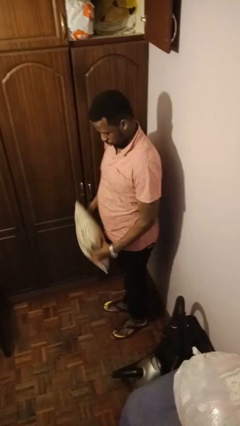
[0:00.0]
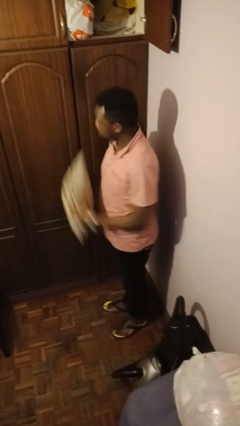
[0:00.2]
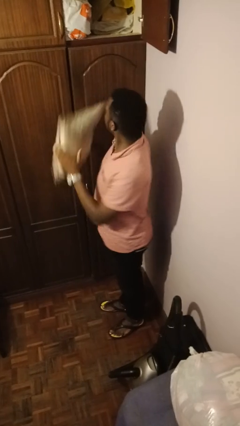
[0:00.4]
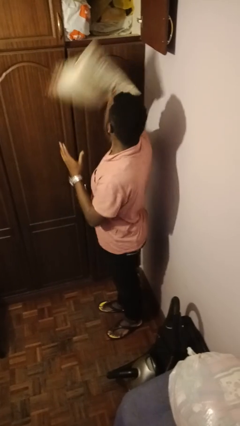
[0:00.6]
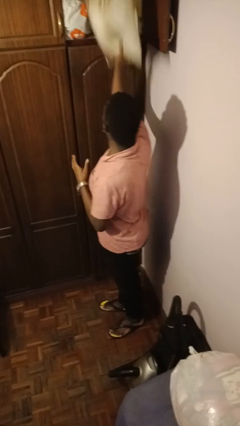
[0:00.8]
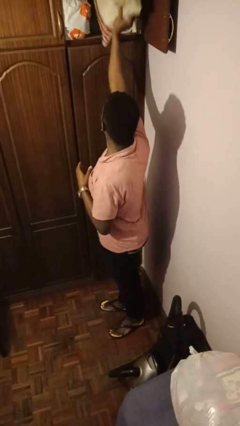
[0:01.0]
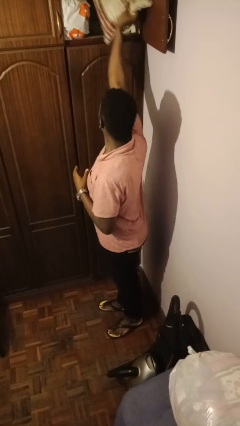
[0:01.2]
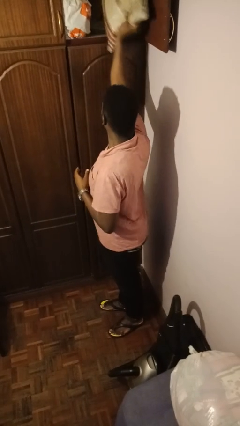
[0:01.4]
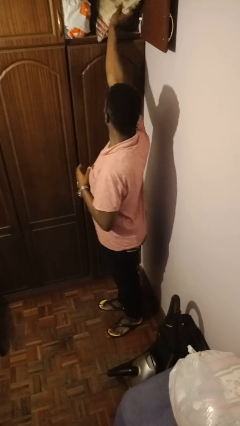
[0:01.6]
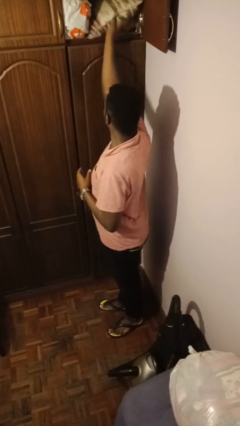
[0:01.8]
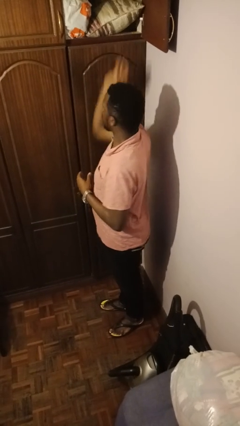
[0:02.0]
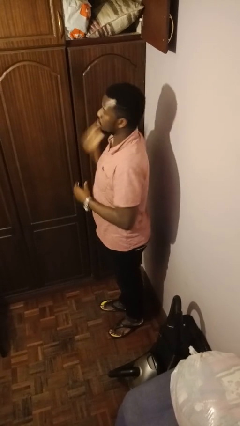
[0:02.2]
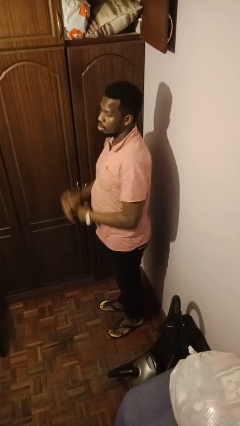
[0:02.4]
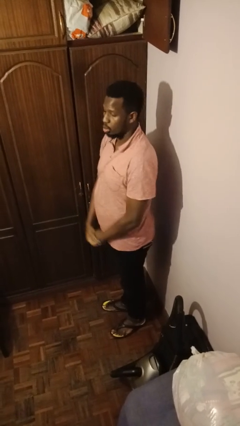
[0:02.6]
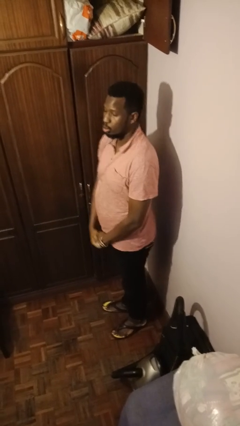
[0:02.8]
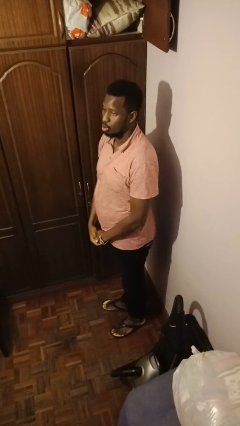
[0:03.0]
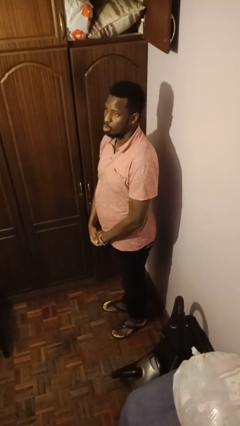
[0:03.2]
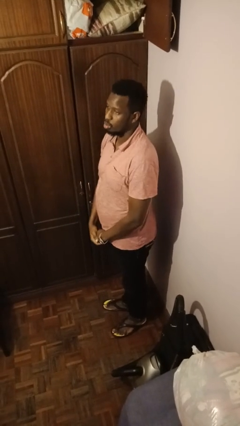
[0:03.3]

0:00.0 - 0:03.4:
person puts down object on shelf

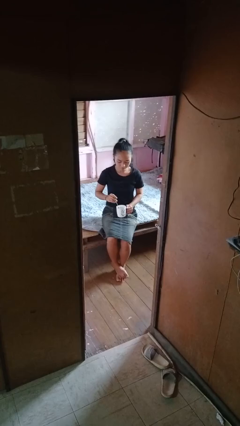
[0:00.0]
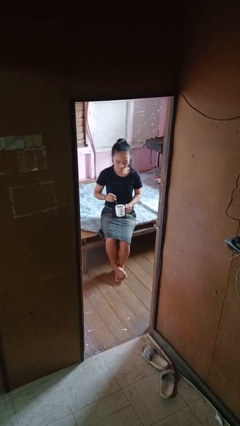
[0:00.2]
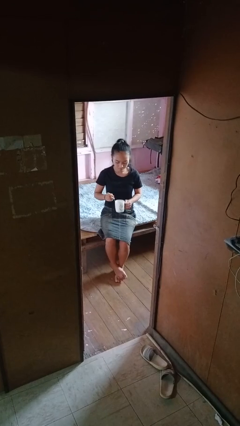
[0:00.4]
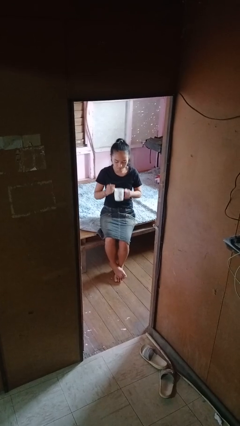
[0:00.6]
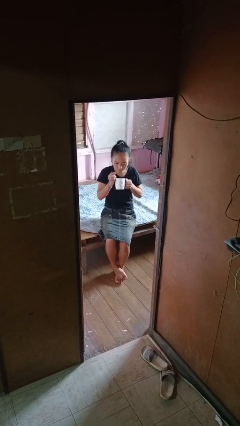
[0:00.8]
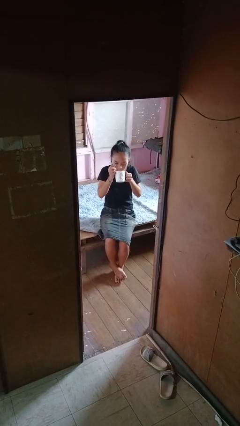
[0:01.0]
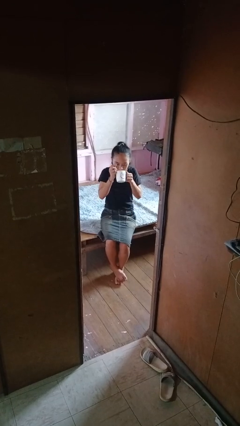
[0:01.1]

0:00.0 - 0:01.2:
person stirs mug

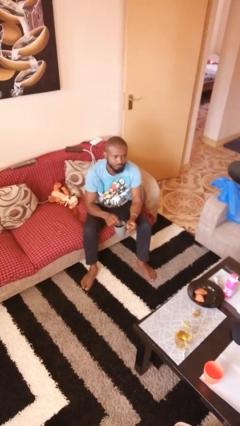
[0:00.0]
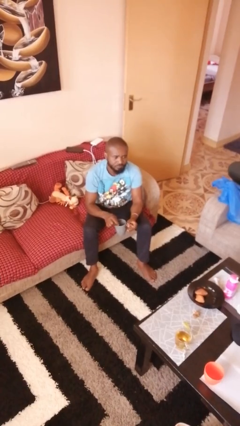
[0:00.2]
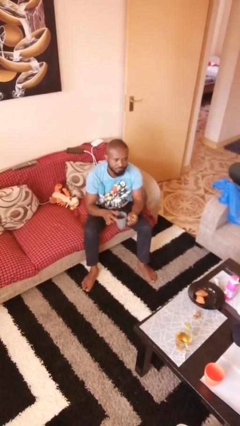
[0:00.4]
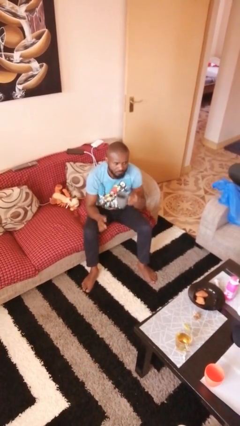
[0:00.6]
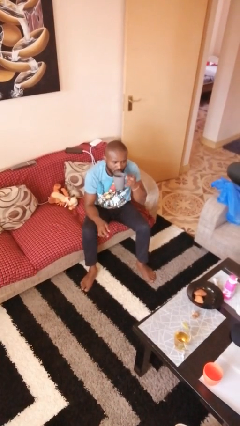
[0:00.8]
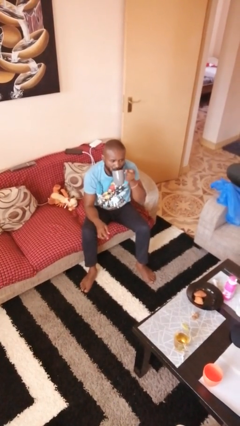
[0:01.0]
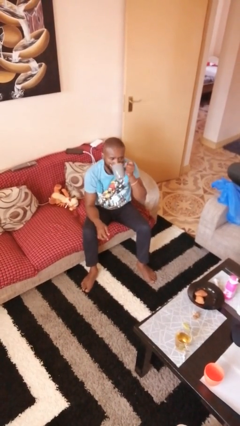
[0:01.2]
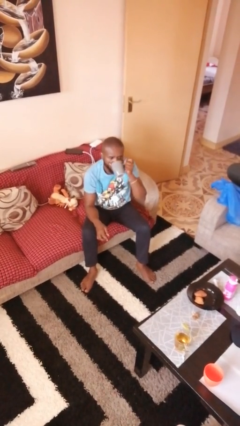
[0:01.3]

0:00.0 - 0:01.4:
person drinks from mug

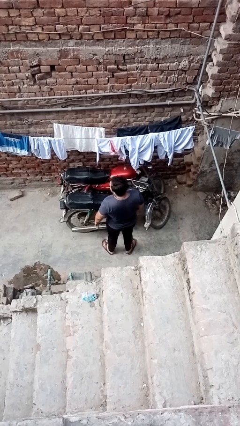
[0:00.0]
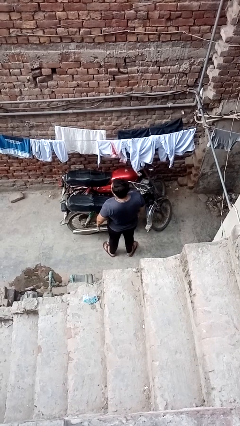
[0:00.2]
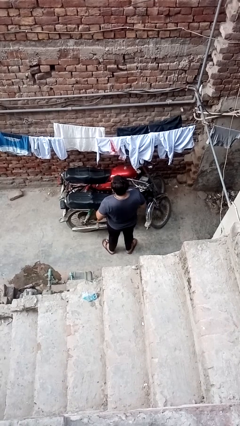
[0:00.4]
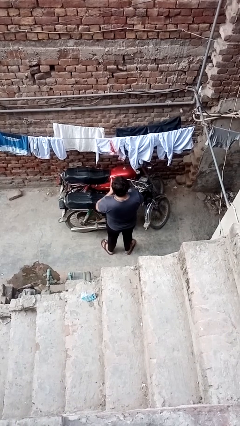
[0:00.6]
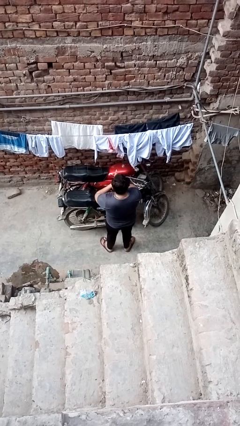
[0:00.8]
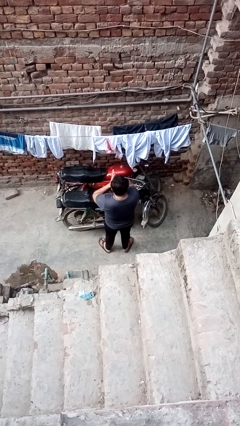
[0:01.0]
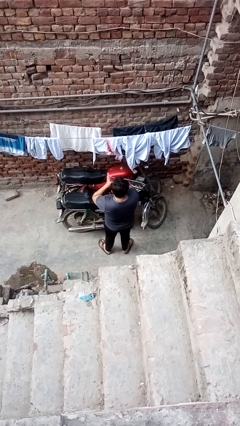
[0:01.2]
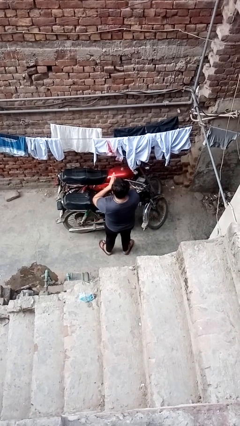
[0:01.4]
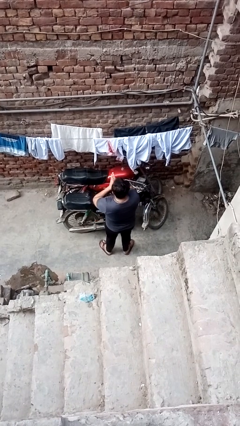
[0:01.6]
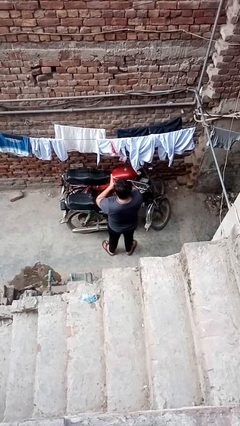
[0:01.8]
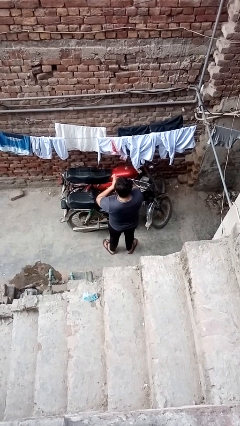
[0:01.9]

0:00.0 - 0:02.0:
person blows into hands

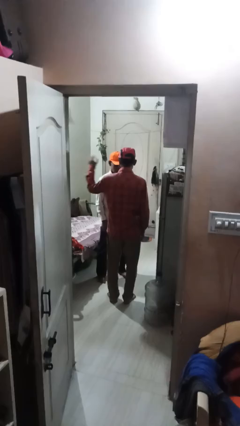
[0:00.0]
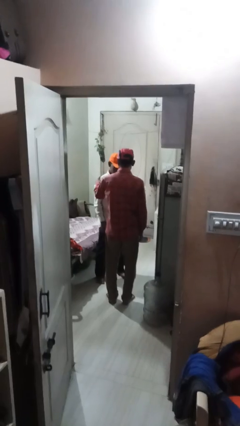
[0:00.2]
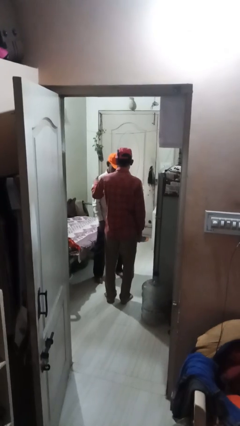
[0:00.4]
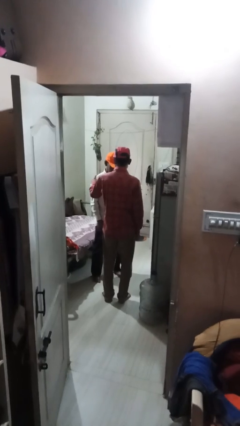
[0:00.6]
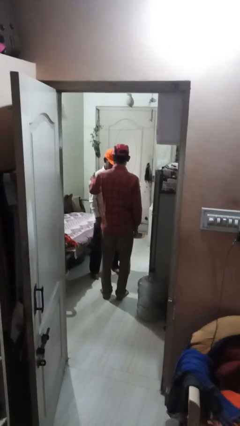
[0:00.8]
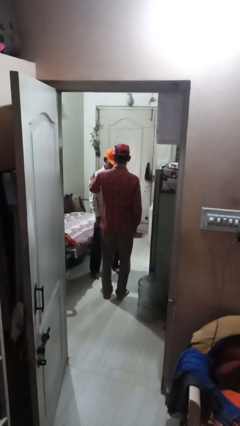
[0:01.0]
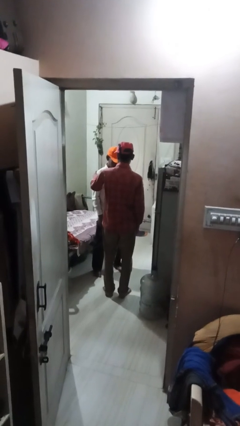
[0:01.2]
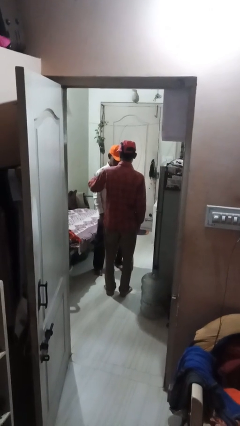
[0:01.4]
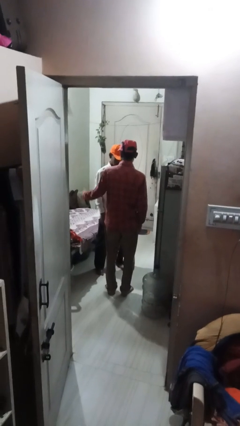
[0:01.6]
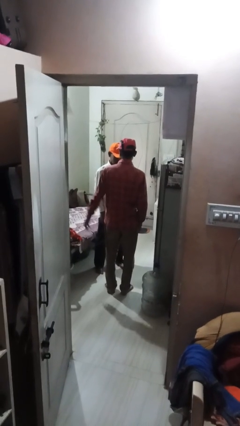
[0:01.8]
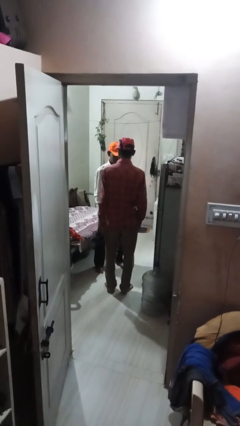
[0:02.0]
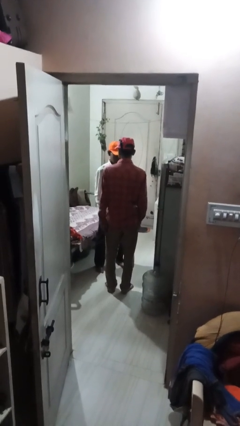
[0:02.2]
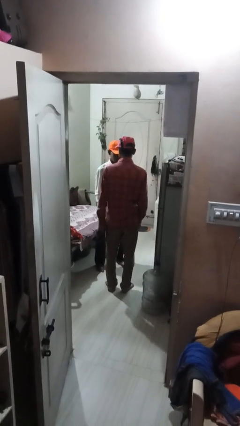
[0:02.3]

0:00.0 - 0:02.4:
person pounds shoulders of person

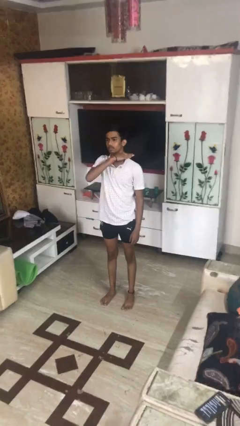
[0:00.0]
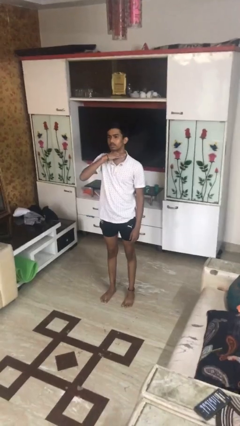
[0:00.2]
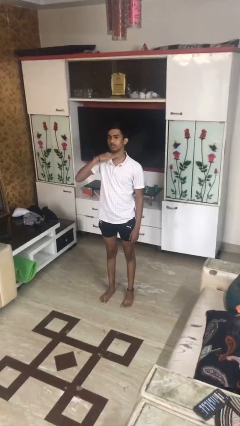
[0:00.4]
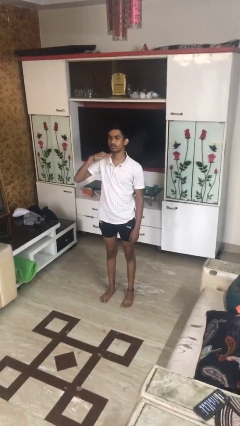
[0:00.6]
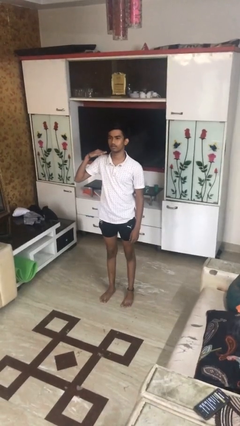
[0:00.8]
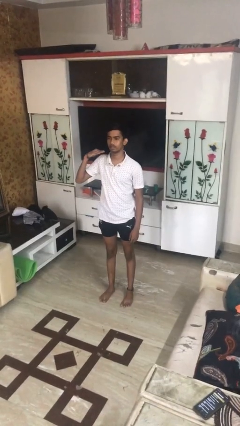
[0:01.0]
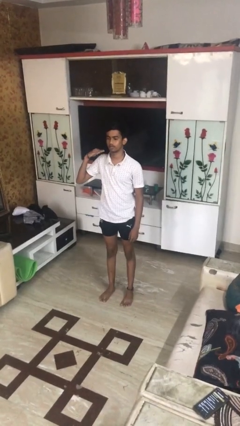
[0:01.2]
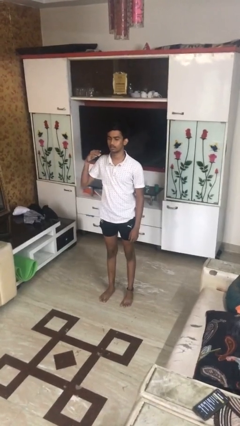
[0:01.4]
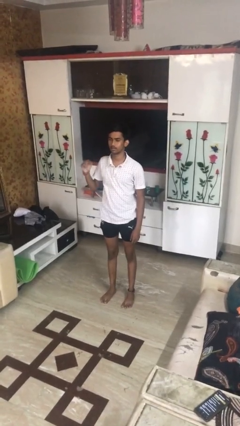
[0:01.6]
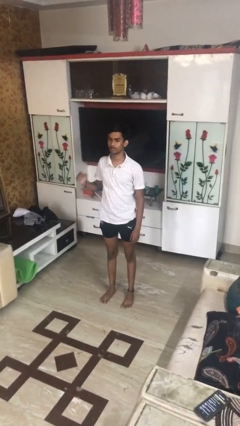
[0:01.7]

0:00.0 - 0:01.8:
person gestures cut

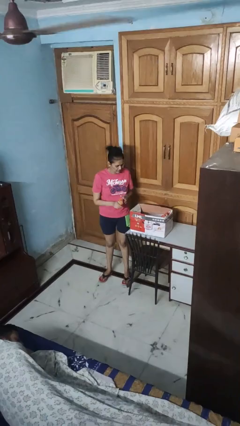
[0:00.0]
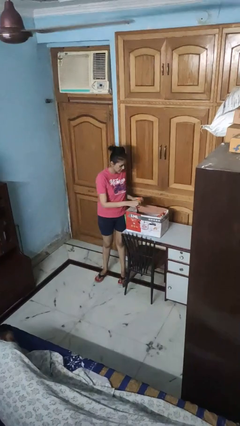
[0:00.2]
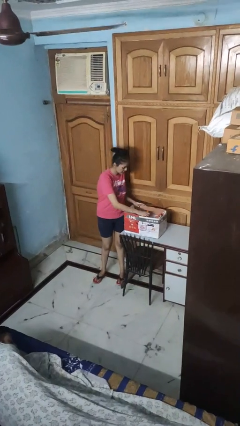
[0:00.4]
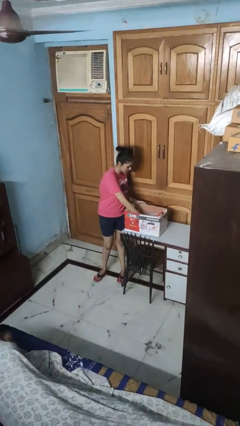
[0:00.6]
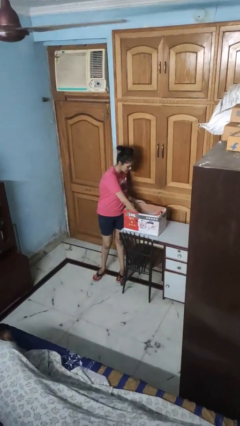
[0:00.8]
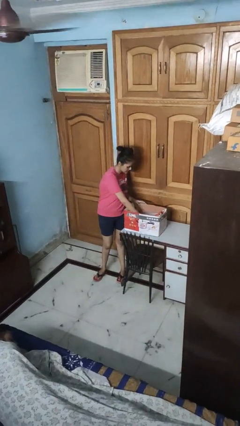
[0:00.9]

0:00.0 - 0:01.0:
person puts object into box

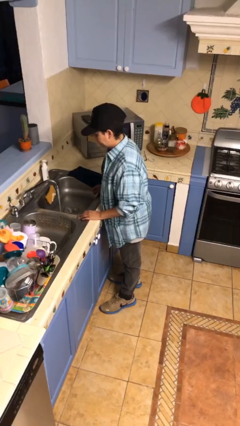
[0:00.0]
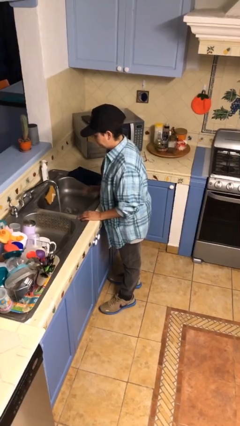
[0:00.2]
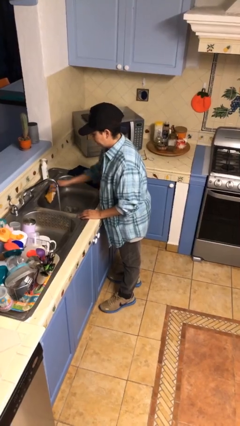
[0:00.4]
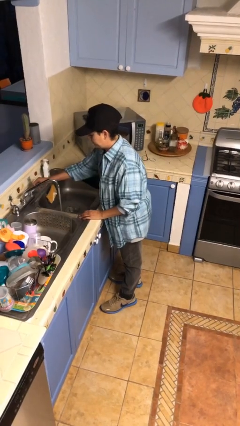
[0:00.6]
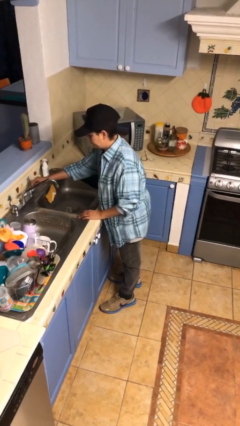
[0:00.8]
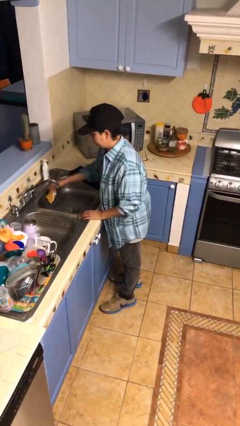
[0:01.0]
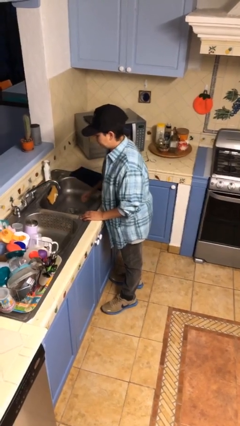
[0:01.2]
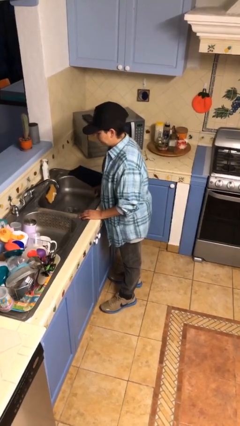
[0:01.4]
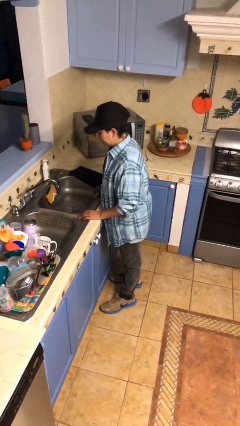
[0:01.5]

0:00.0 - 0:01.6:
person turns off faucet

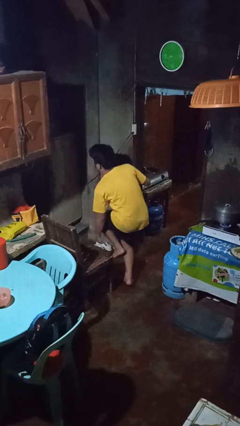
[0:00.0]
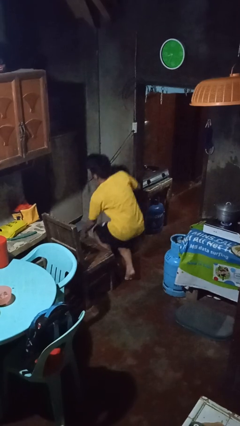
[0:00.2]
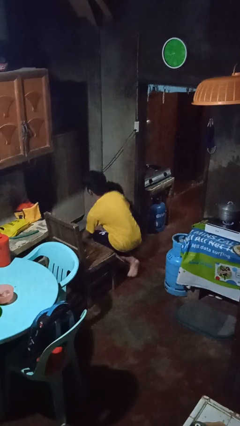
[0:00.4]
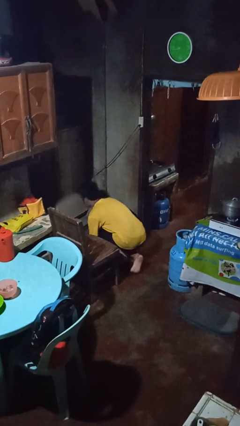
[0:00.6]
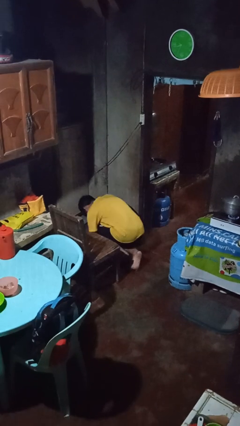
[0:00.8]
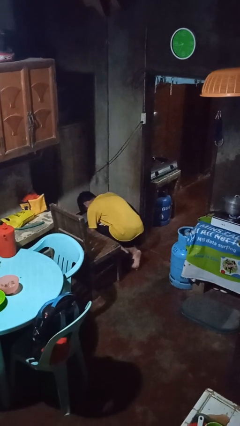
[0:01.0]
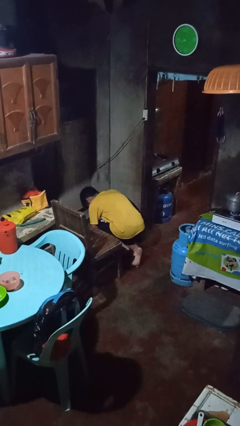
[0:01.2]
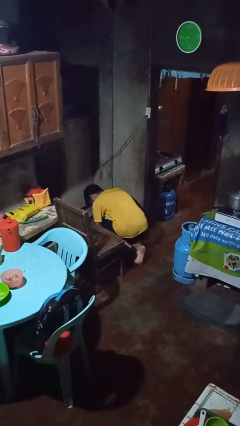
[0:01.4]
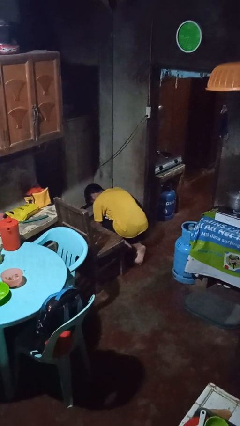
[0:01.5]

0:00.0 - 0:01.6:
person lies down on floor

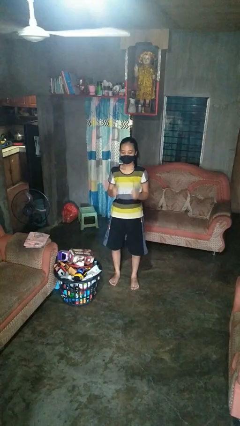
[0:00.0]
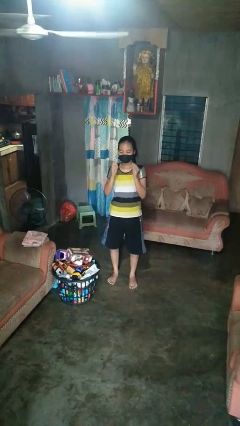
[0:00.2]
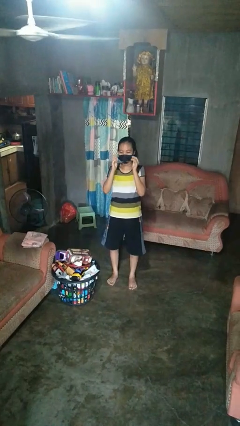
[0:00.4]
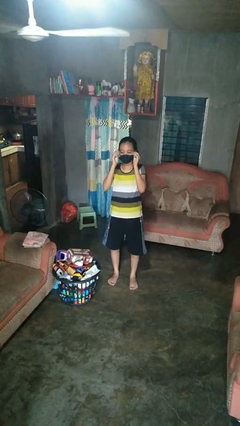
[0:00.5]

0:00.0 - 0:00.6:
person puts on glasses
